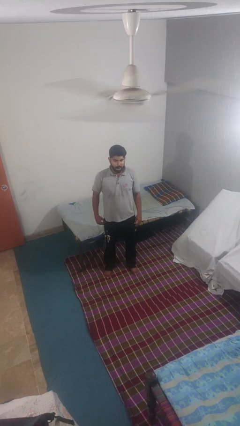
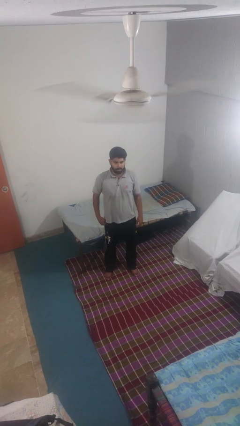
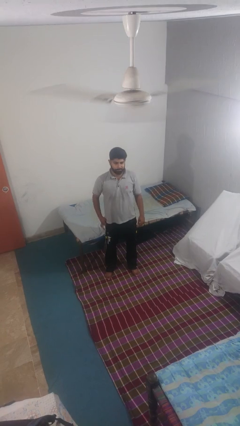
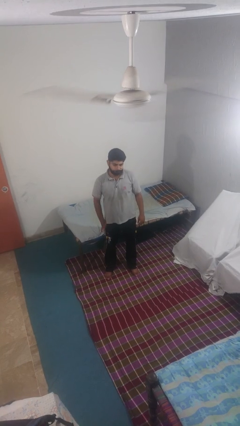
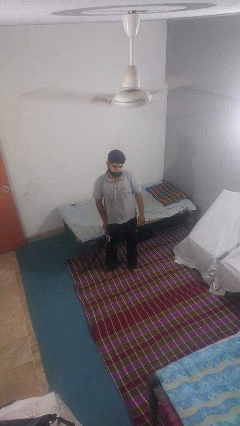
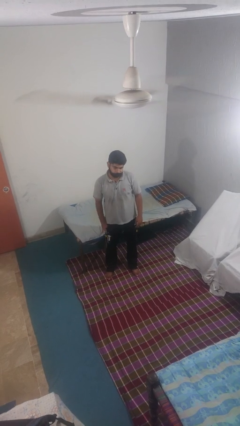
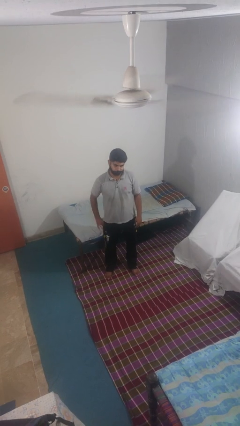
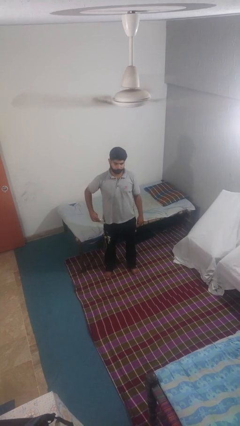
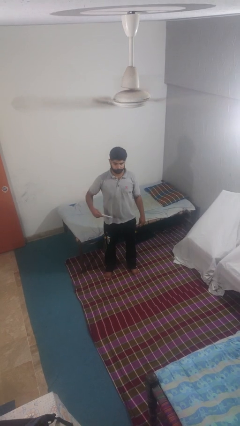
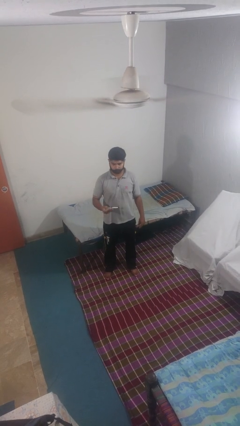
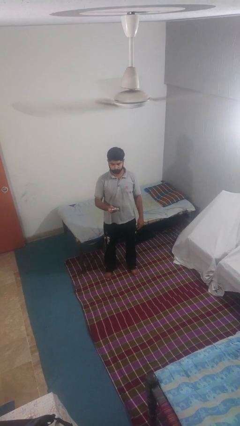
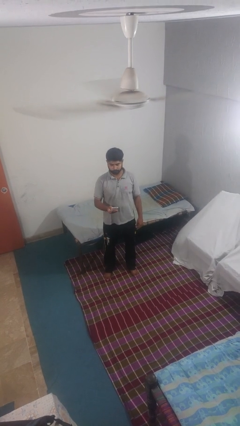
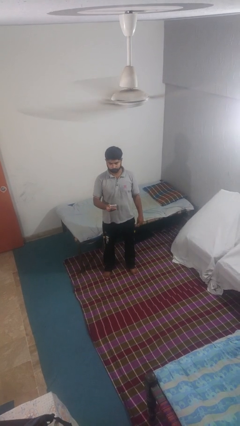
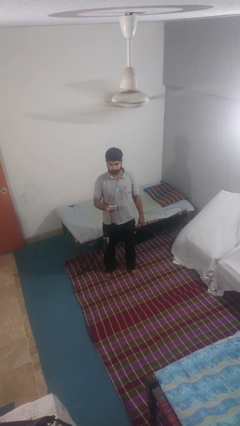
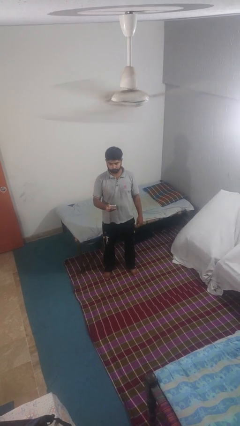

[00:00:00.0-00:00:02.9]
person takes phone from pocket

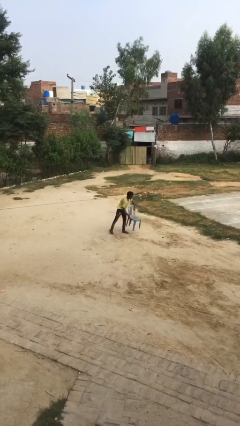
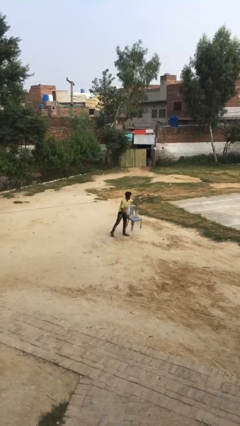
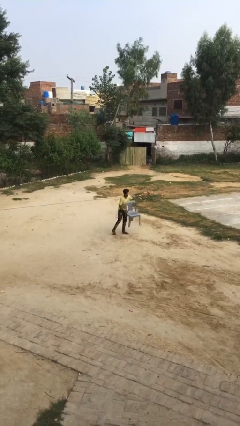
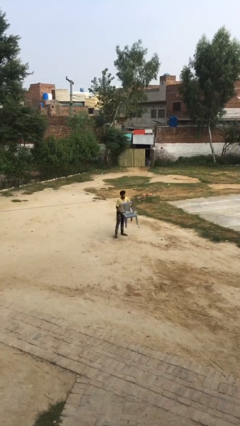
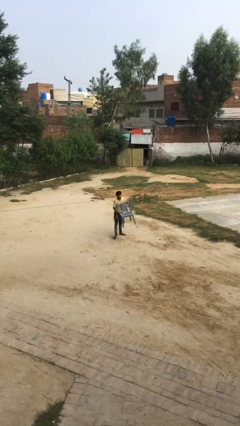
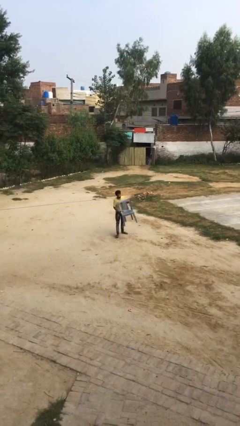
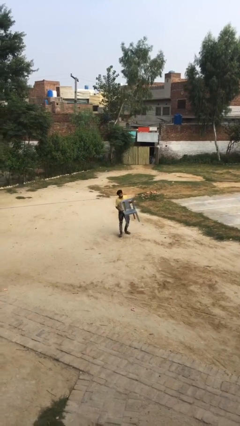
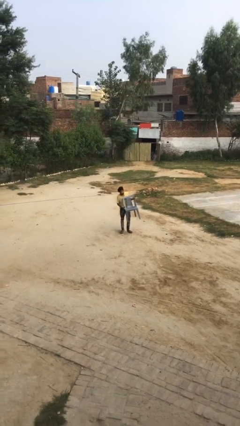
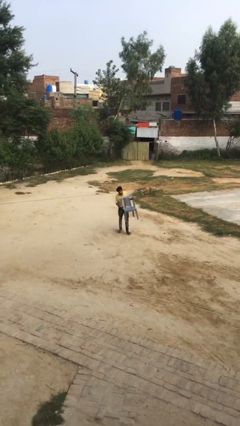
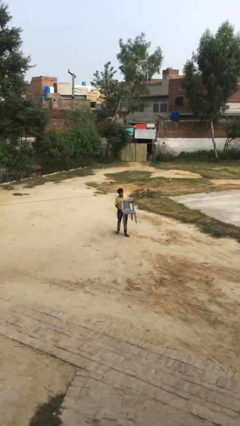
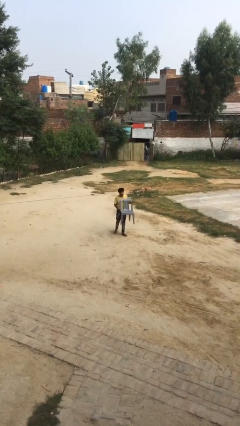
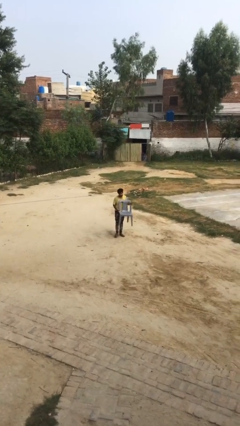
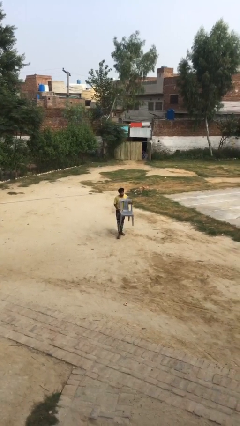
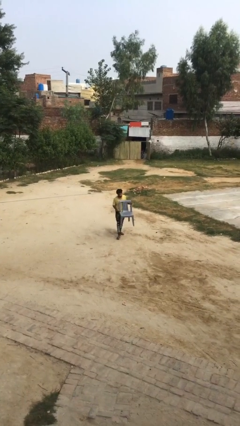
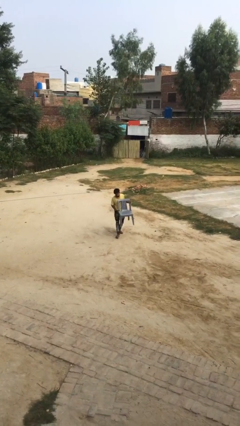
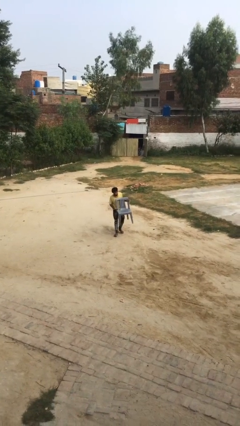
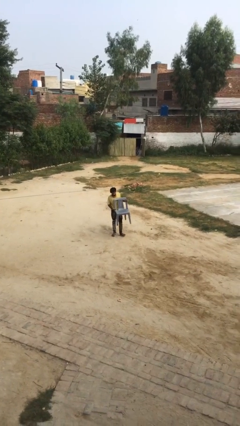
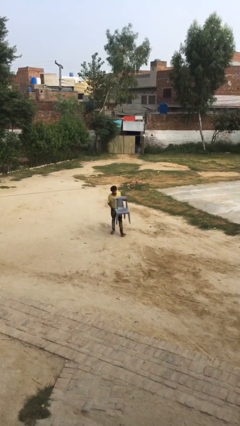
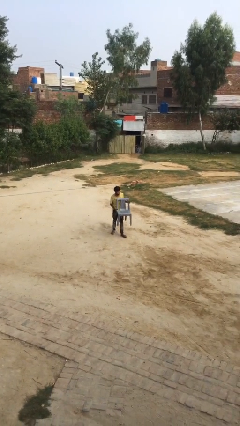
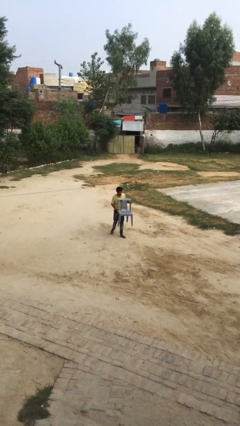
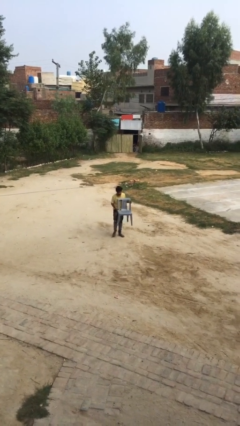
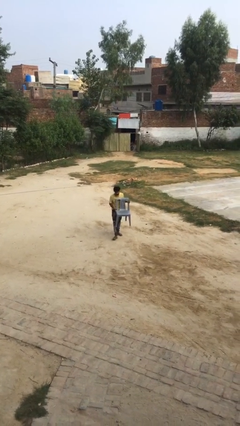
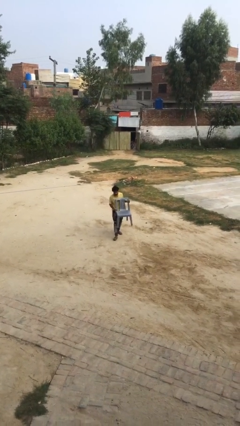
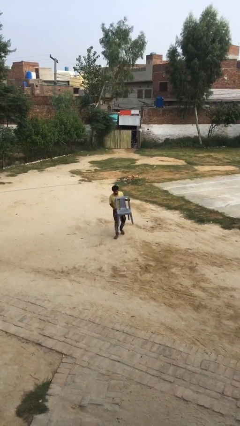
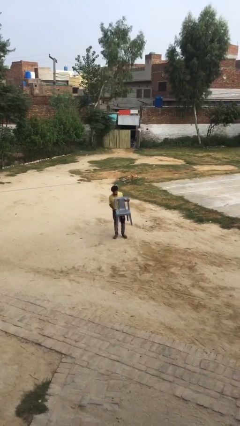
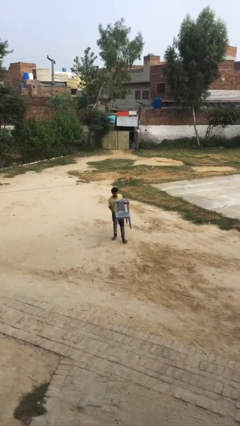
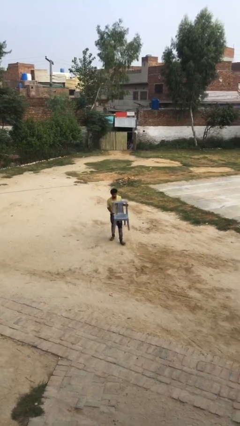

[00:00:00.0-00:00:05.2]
person carries heavy object

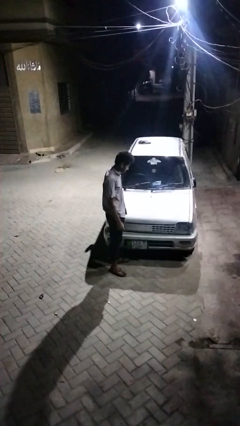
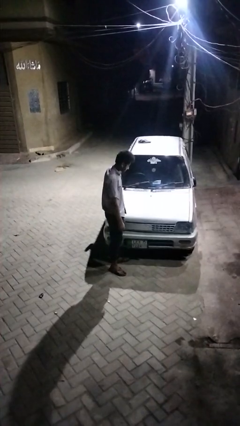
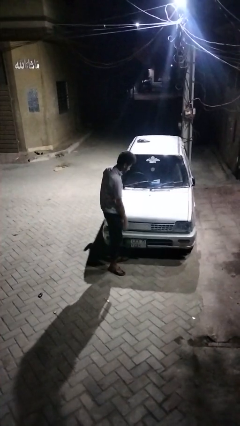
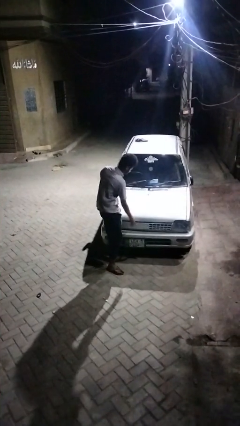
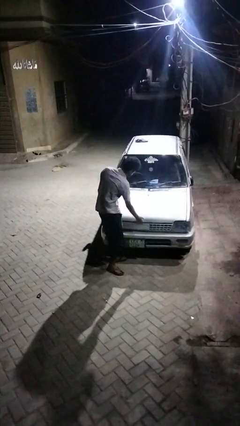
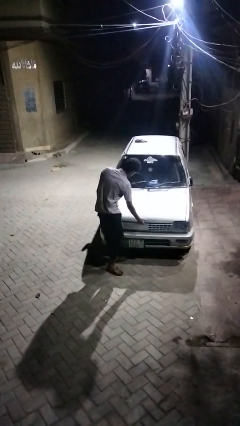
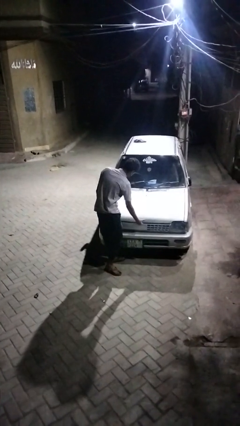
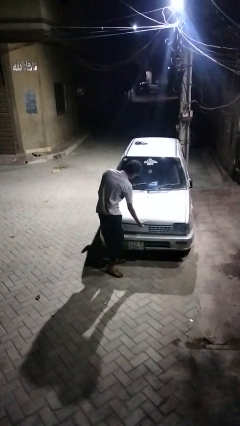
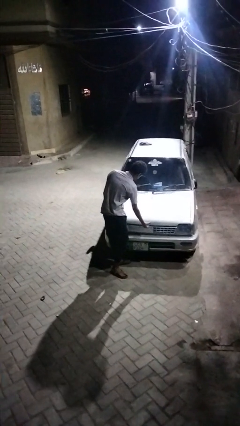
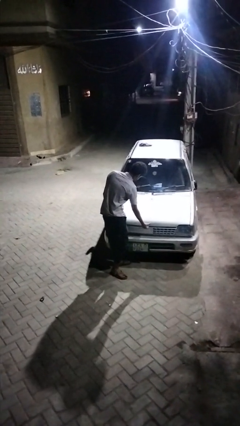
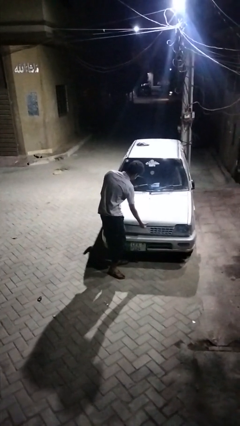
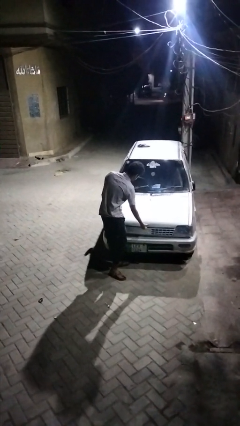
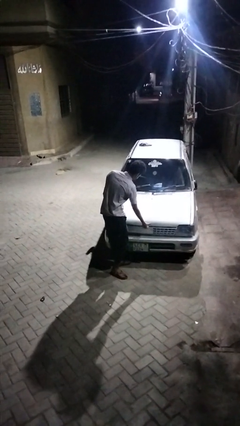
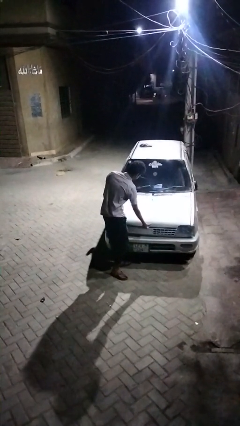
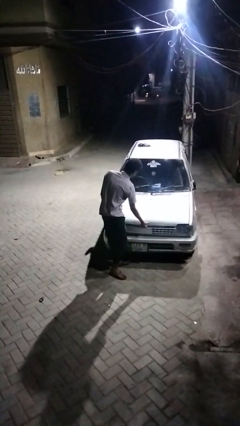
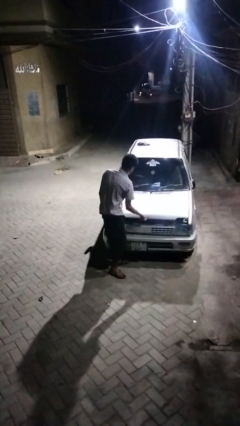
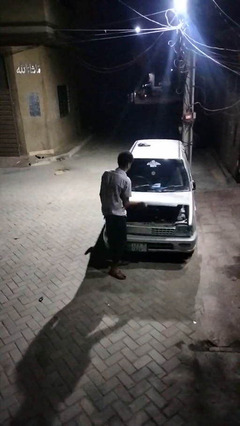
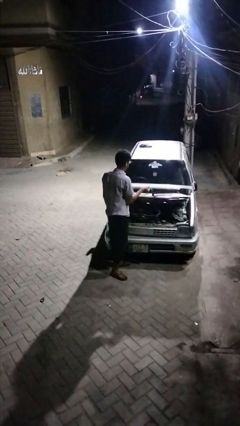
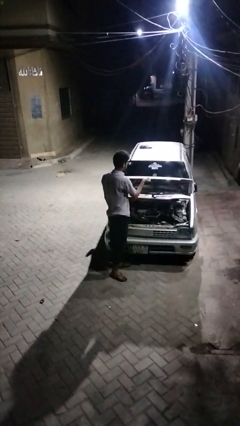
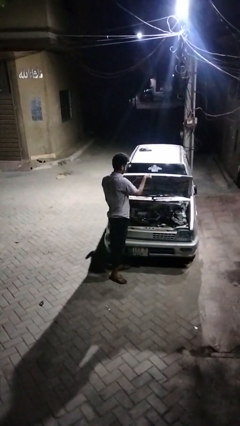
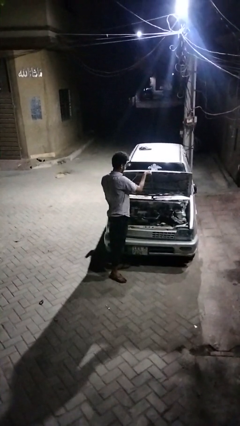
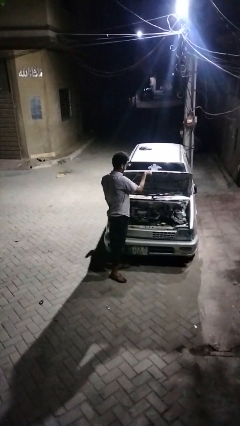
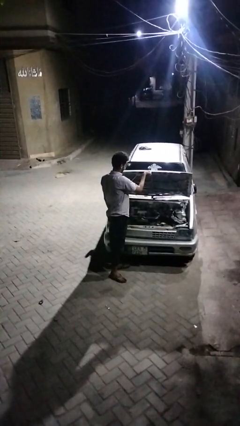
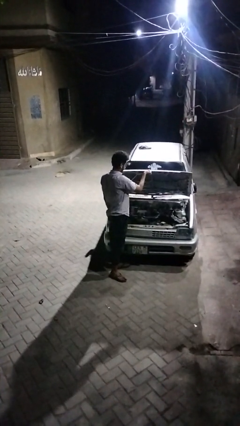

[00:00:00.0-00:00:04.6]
person opens car hood

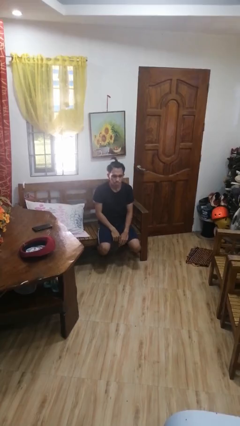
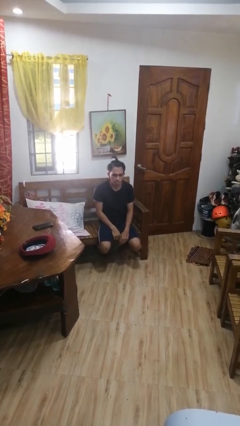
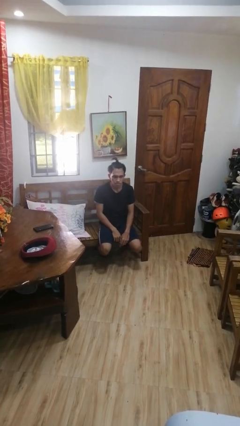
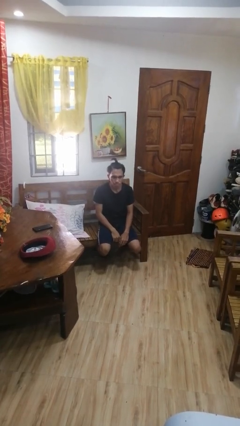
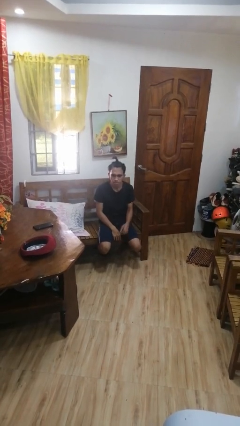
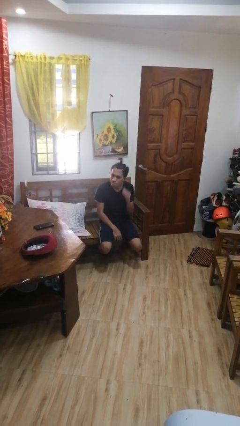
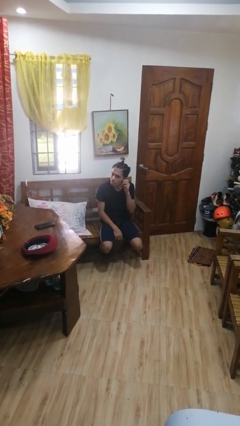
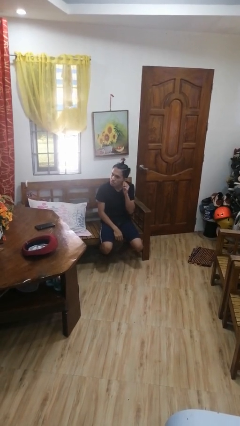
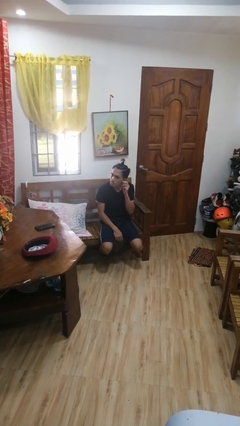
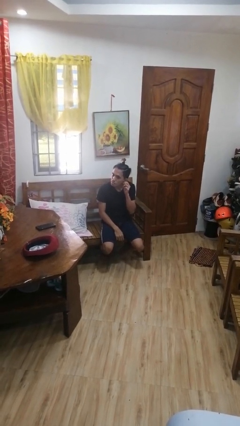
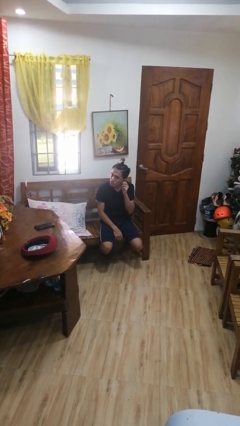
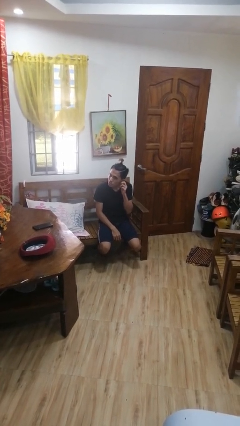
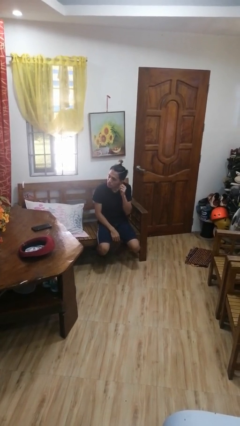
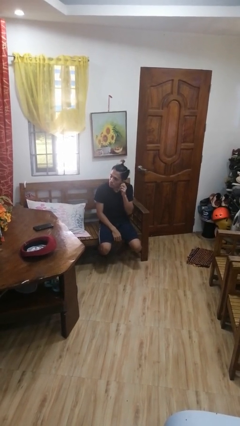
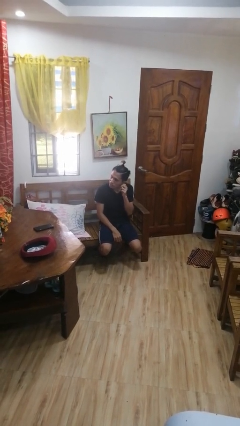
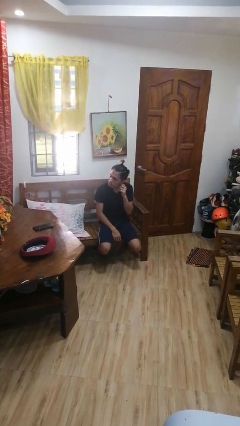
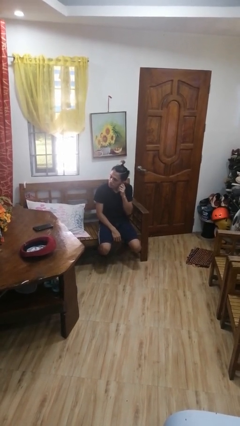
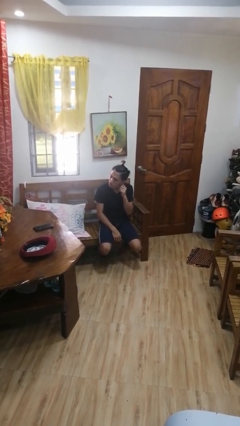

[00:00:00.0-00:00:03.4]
person touches earlobe

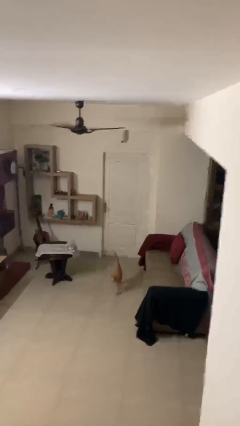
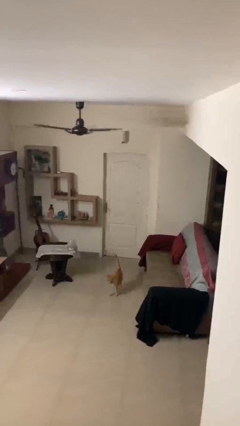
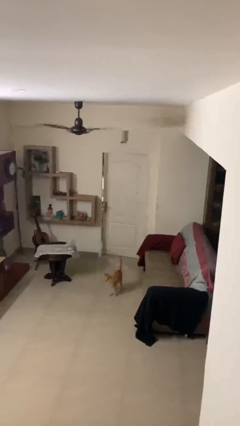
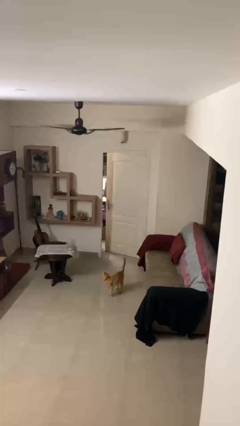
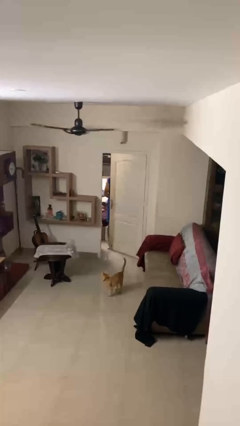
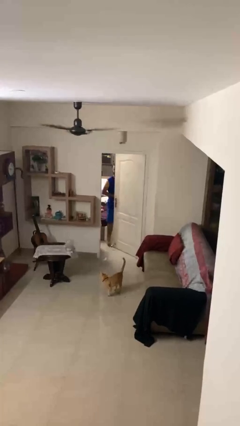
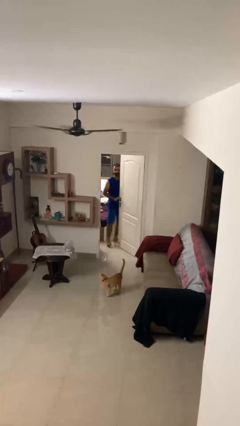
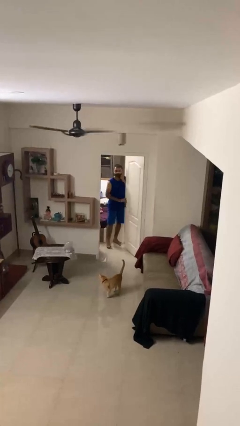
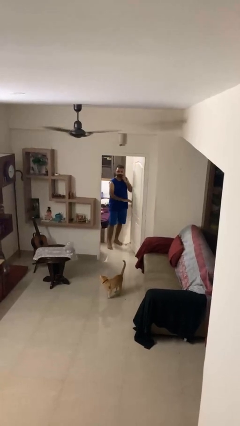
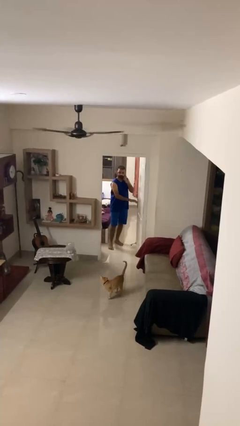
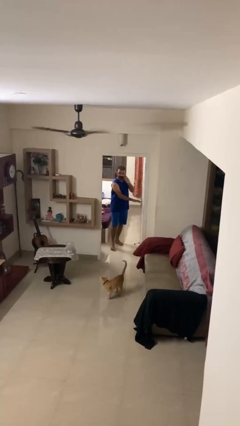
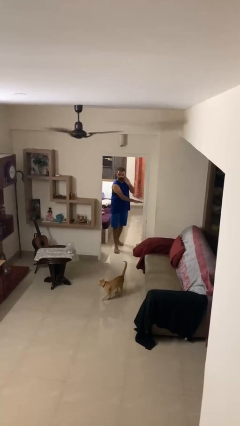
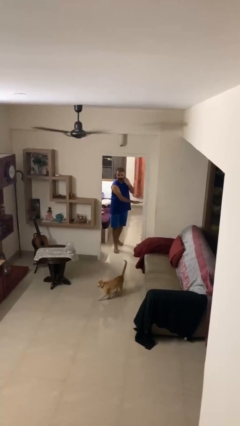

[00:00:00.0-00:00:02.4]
person opens facility door
